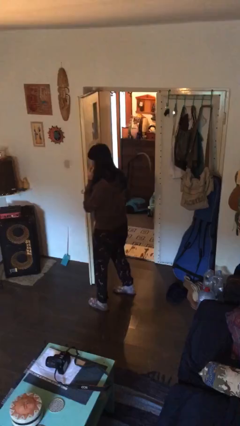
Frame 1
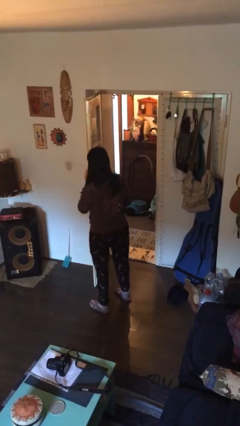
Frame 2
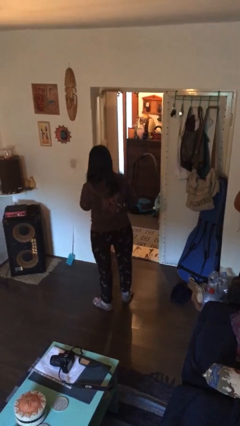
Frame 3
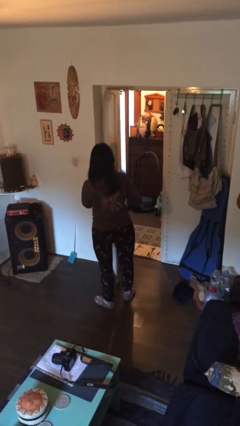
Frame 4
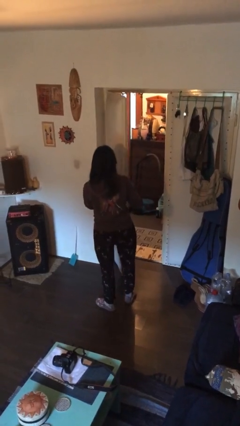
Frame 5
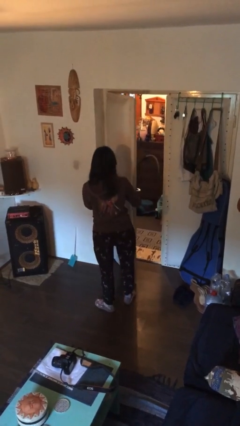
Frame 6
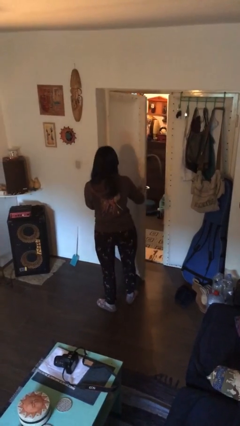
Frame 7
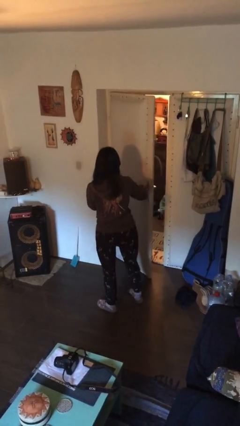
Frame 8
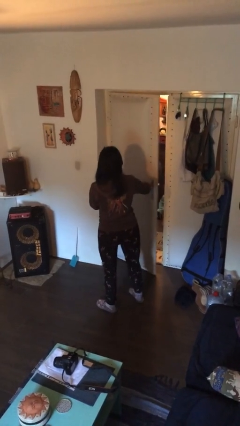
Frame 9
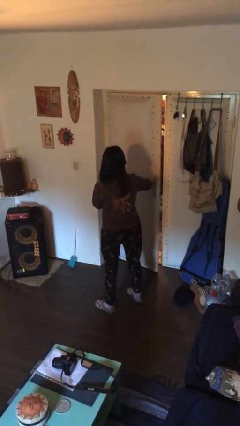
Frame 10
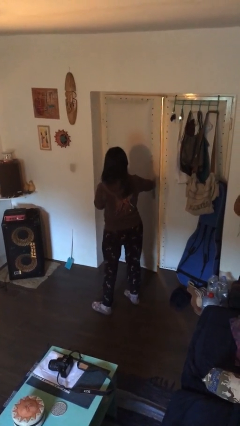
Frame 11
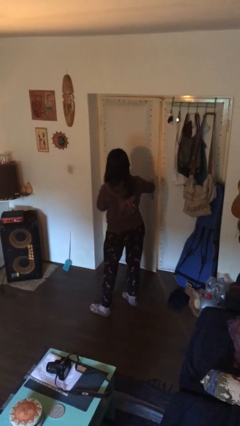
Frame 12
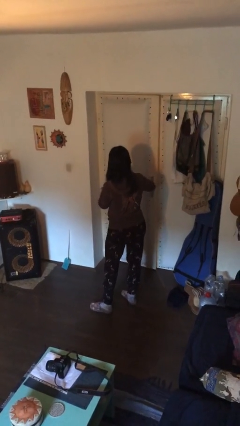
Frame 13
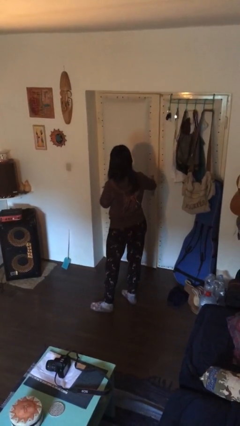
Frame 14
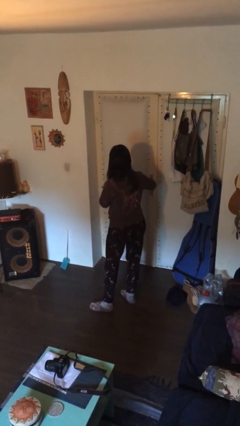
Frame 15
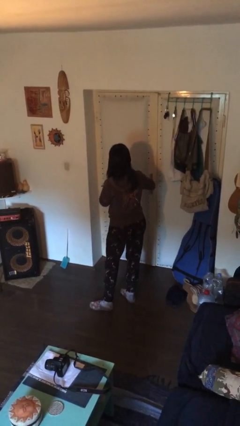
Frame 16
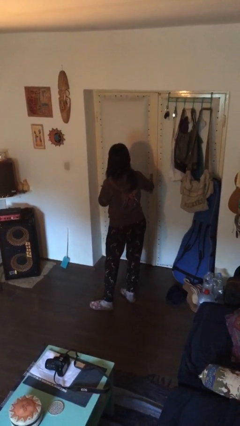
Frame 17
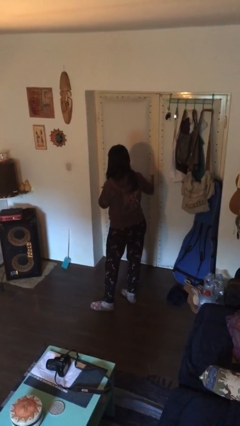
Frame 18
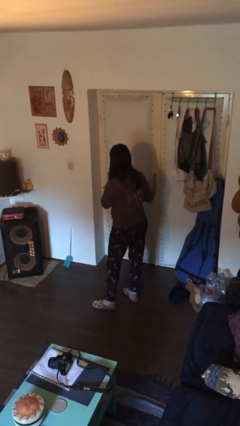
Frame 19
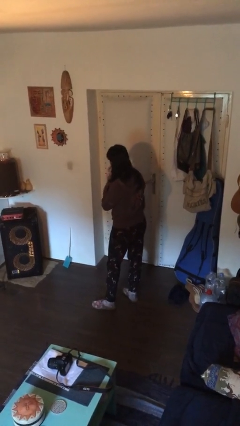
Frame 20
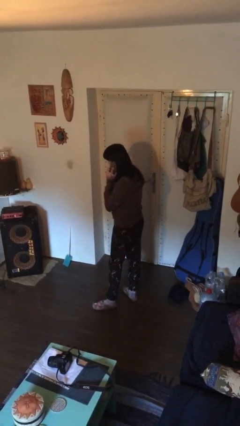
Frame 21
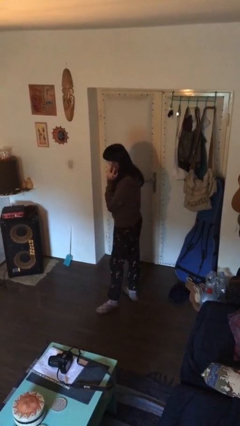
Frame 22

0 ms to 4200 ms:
person closes facility door

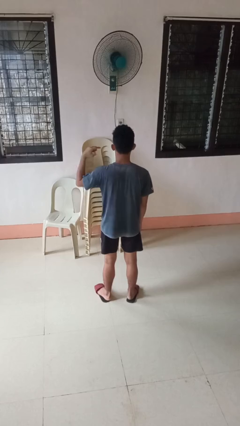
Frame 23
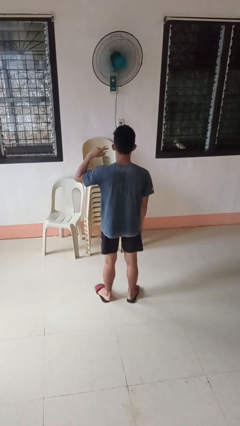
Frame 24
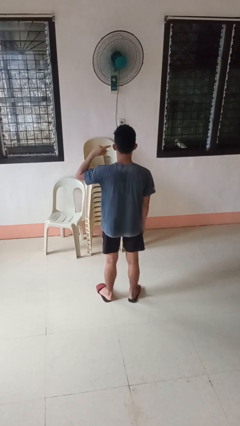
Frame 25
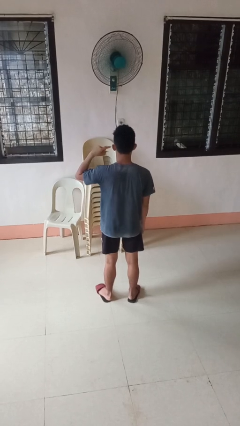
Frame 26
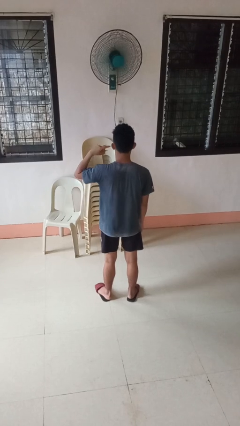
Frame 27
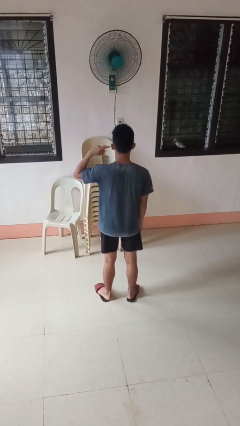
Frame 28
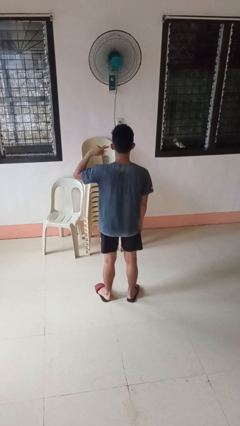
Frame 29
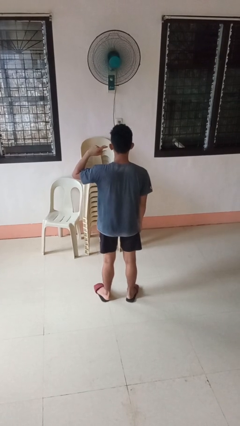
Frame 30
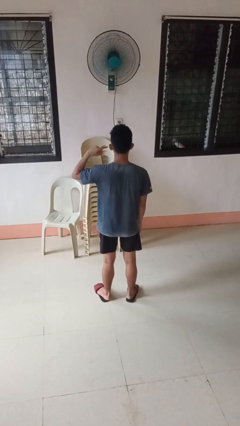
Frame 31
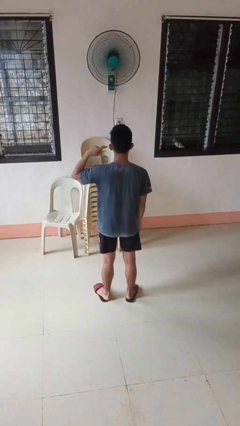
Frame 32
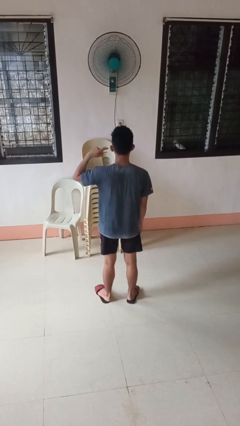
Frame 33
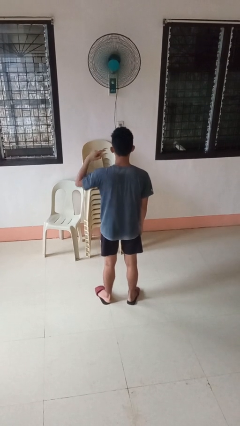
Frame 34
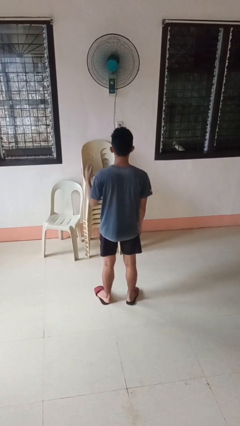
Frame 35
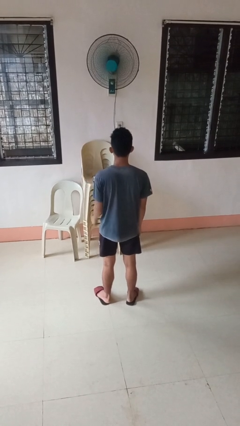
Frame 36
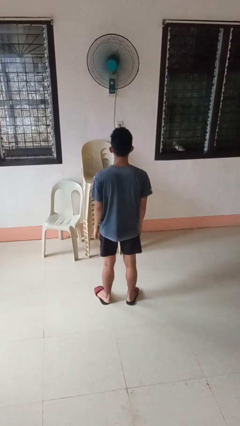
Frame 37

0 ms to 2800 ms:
person gestures listen closely

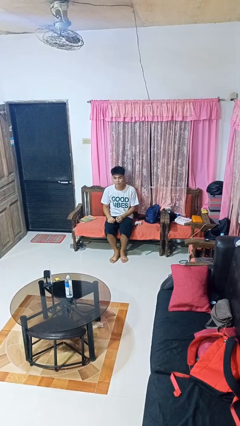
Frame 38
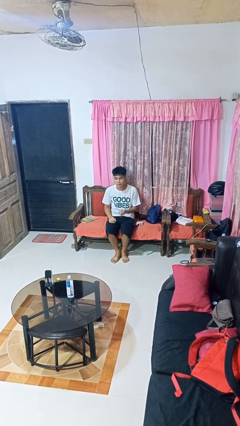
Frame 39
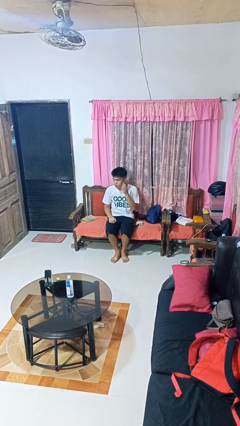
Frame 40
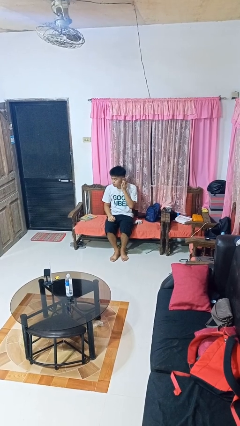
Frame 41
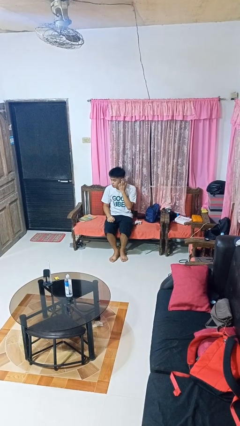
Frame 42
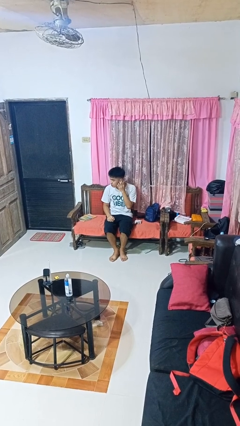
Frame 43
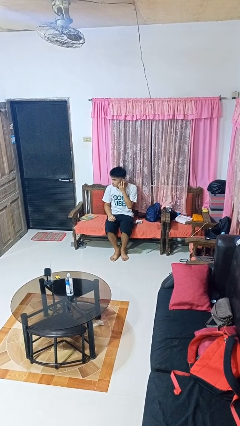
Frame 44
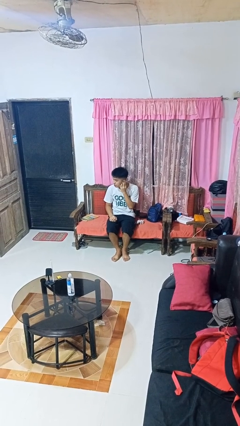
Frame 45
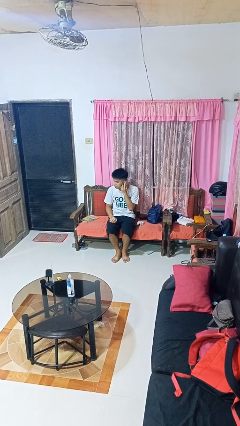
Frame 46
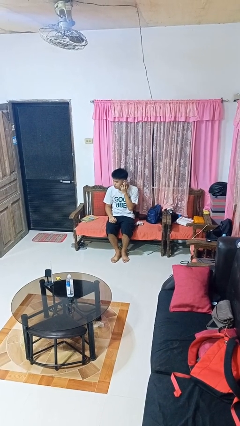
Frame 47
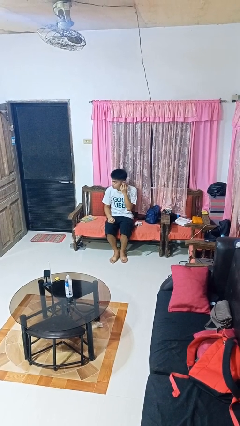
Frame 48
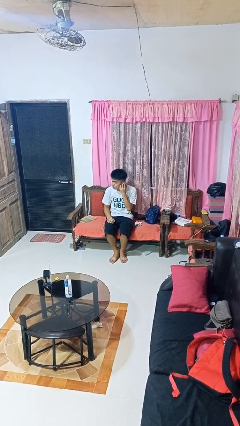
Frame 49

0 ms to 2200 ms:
person touches earlobe

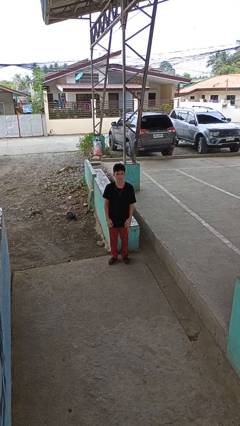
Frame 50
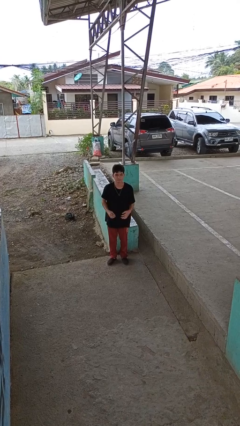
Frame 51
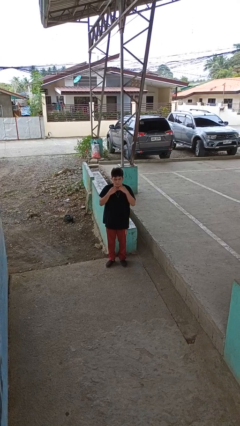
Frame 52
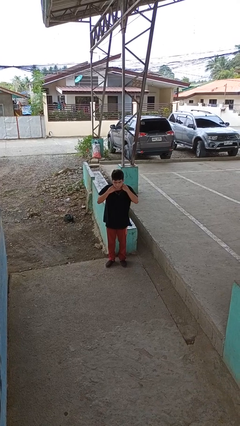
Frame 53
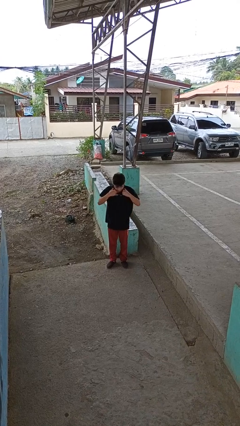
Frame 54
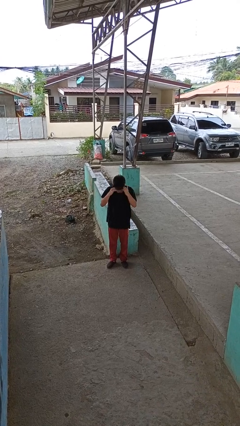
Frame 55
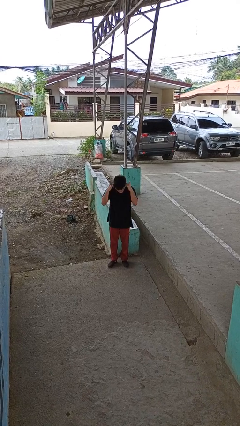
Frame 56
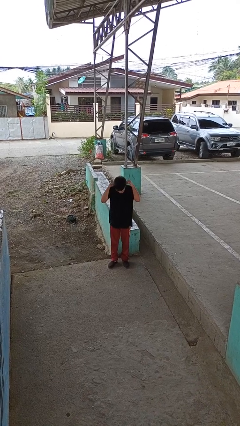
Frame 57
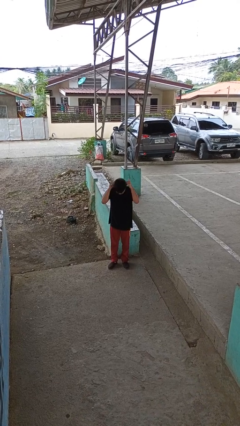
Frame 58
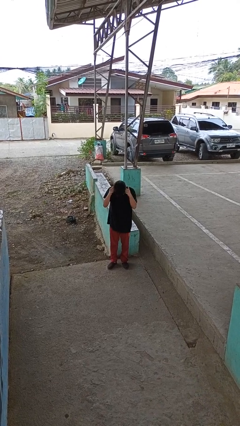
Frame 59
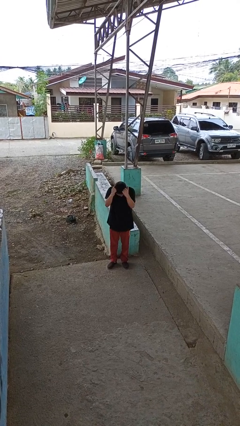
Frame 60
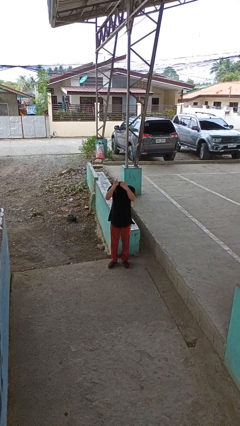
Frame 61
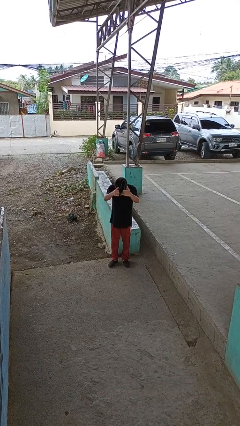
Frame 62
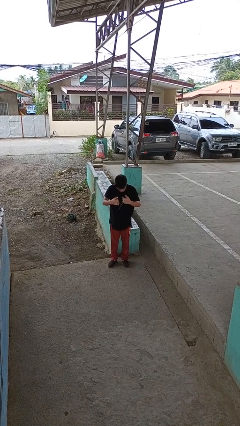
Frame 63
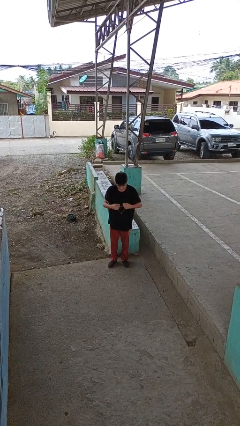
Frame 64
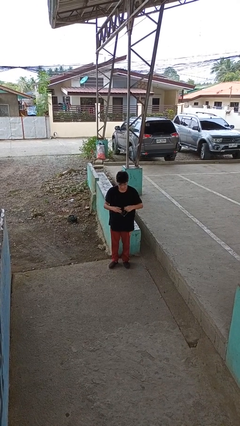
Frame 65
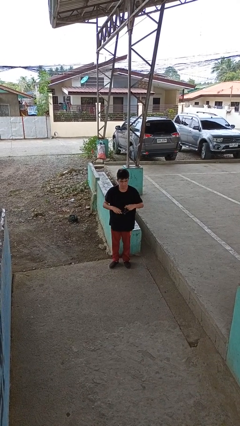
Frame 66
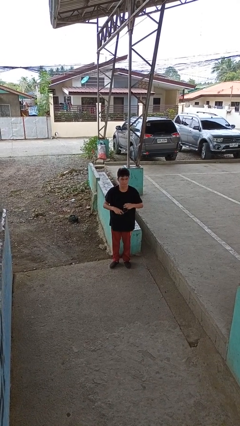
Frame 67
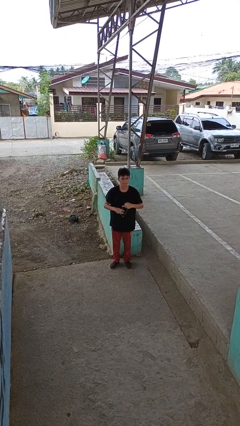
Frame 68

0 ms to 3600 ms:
person takes off necklace

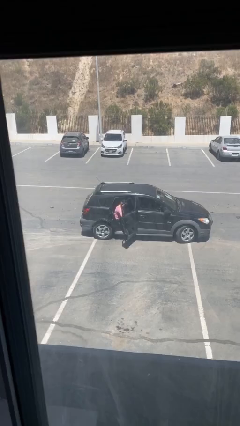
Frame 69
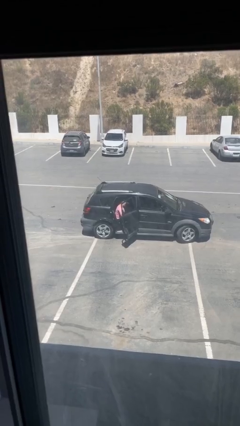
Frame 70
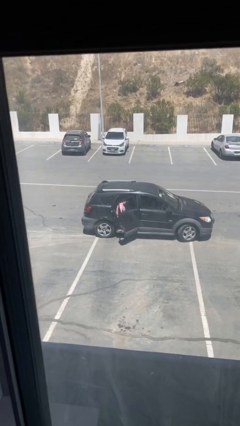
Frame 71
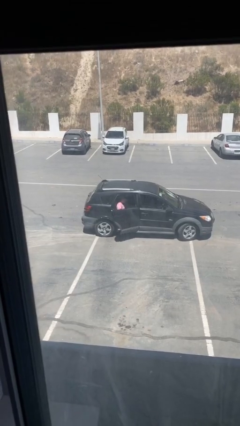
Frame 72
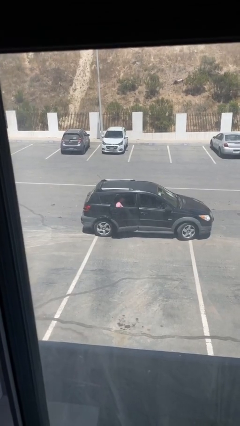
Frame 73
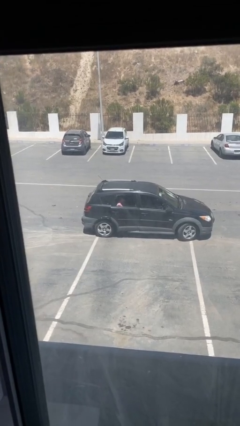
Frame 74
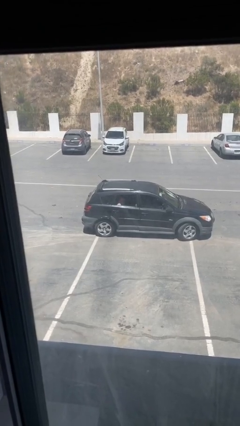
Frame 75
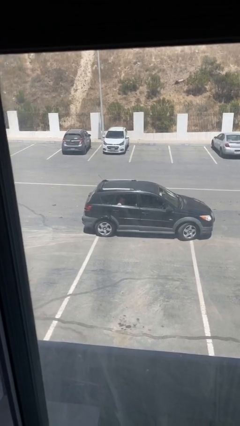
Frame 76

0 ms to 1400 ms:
person closes car door

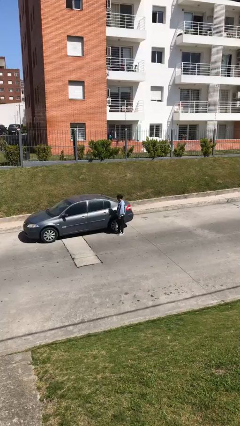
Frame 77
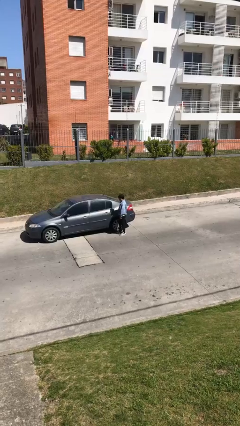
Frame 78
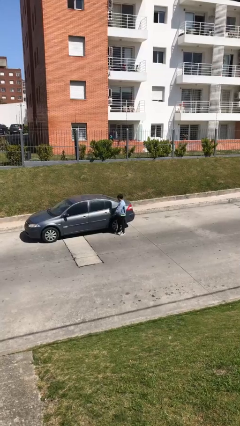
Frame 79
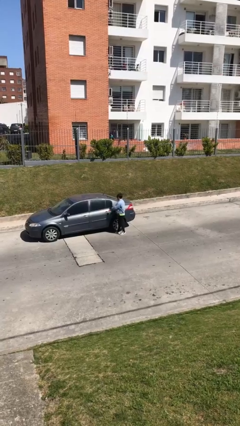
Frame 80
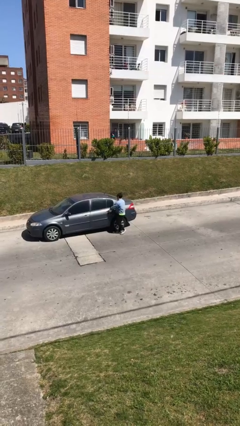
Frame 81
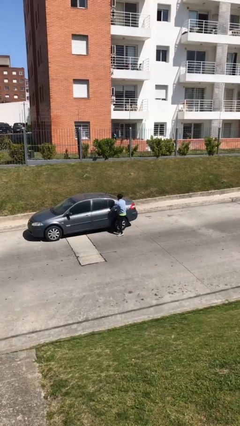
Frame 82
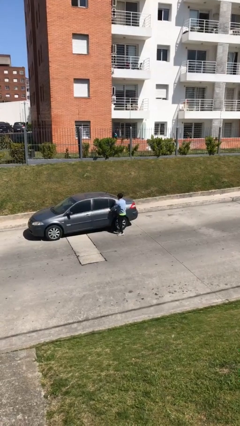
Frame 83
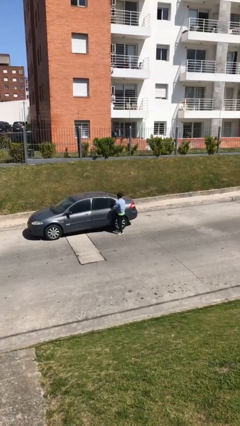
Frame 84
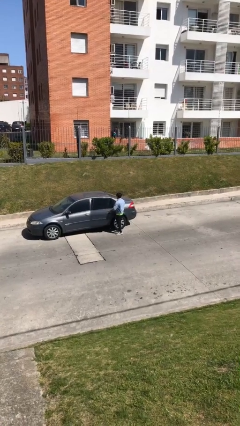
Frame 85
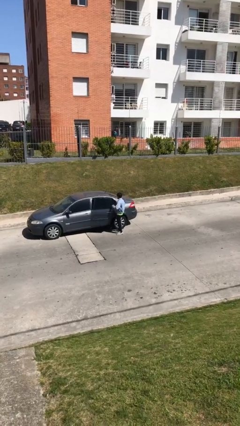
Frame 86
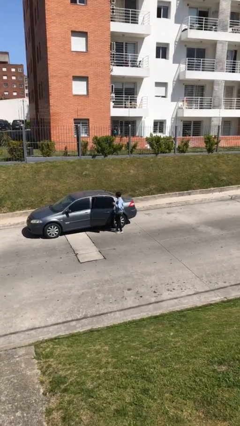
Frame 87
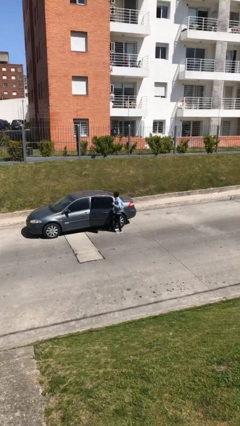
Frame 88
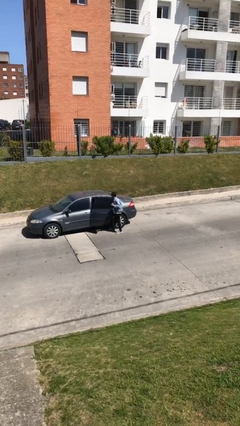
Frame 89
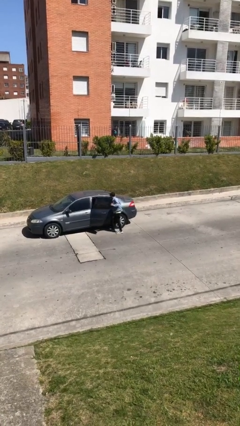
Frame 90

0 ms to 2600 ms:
person opens car door

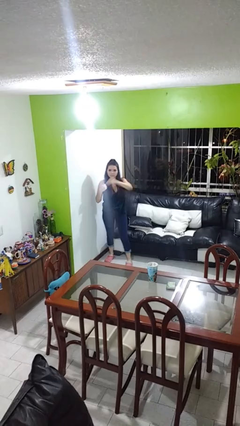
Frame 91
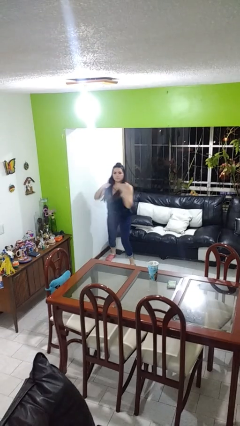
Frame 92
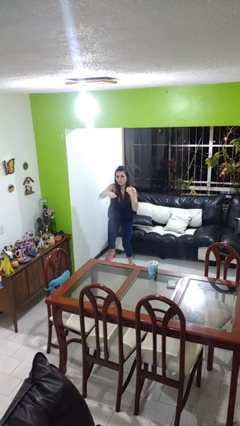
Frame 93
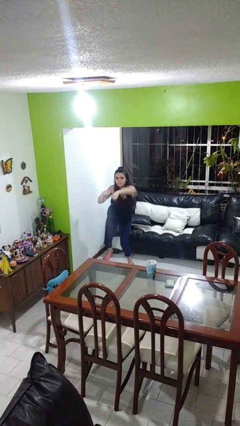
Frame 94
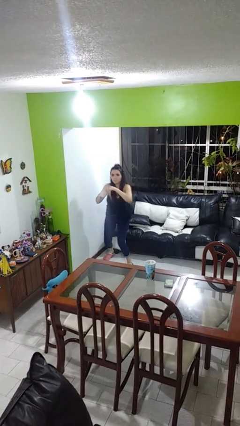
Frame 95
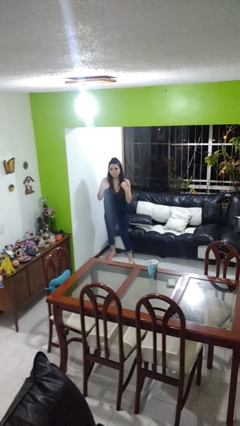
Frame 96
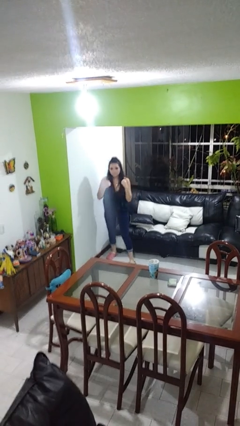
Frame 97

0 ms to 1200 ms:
person punches
